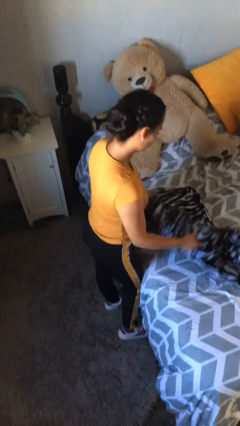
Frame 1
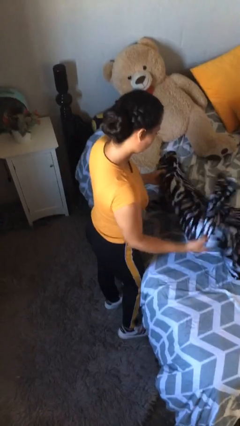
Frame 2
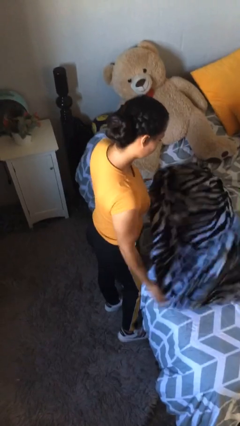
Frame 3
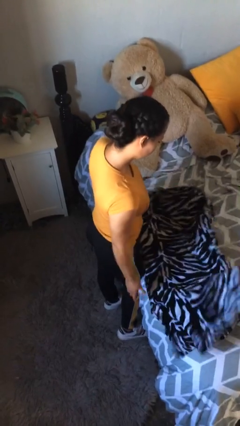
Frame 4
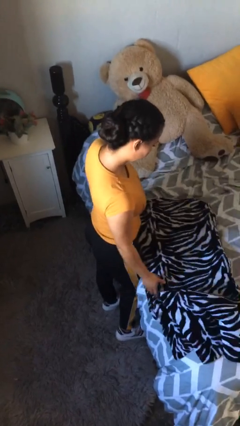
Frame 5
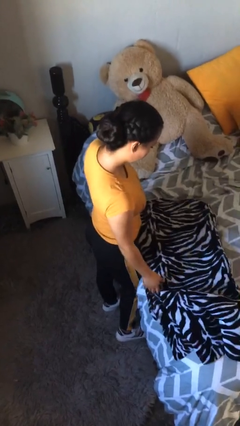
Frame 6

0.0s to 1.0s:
person unfolds blanket

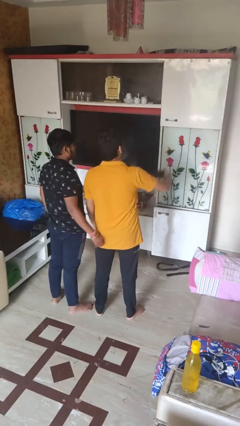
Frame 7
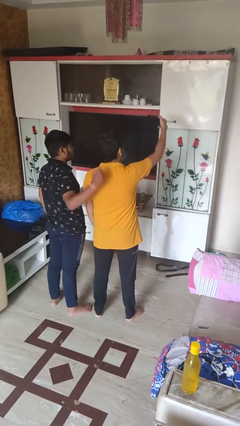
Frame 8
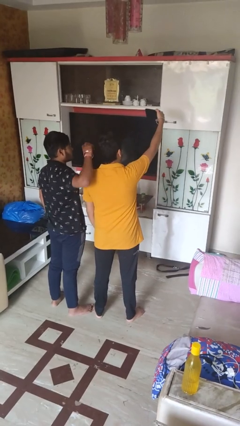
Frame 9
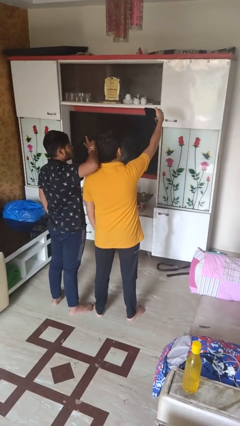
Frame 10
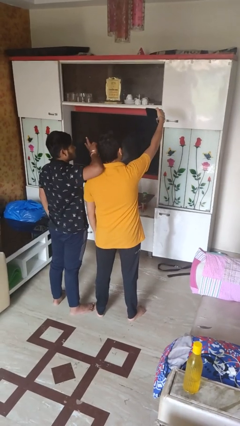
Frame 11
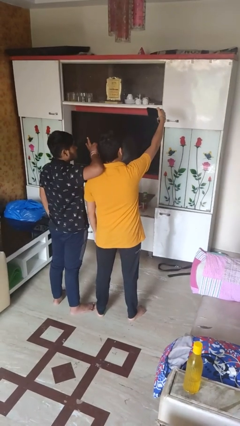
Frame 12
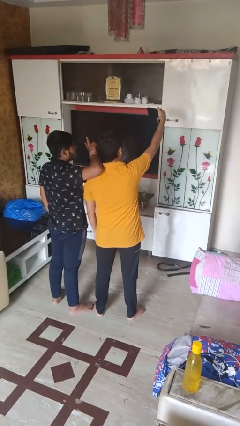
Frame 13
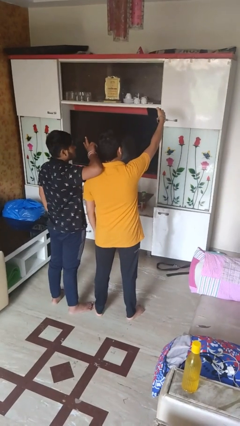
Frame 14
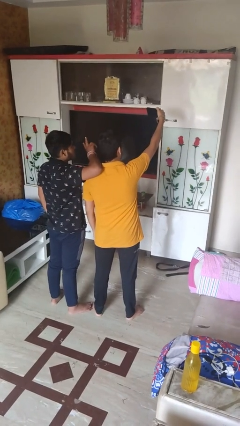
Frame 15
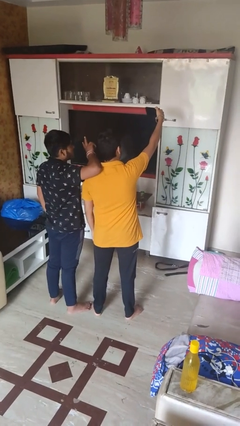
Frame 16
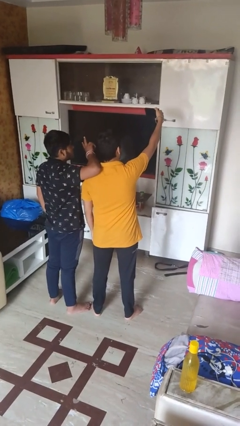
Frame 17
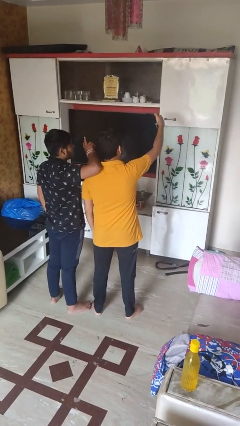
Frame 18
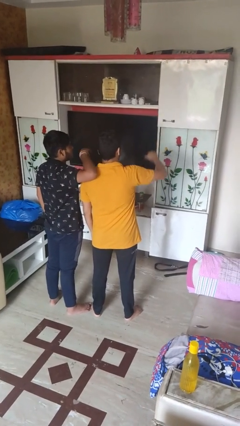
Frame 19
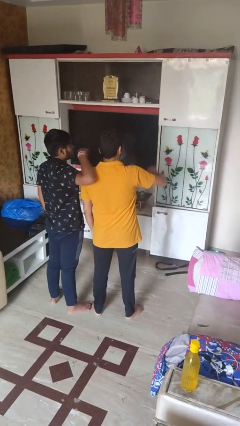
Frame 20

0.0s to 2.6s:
person takes selfie with person

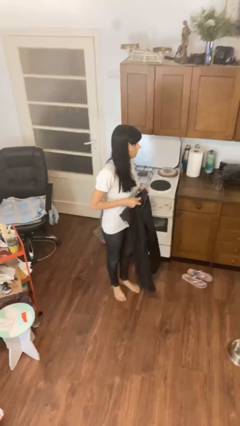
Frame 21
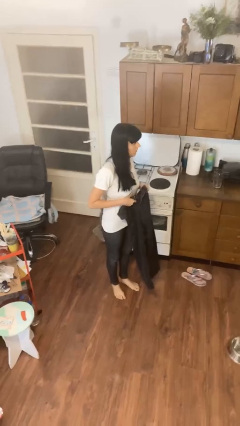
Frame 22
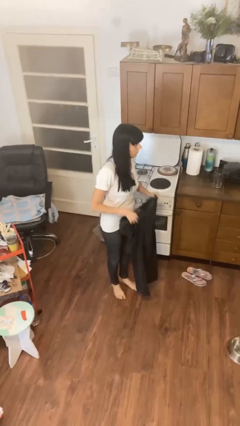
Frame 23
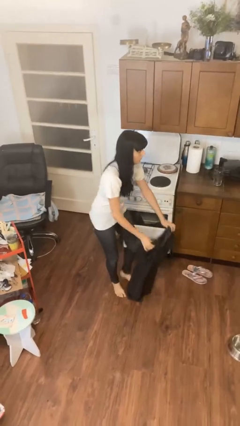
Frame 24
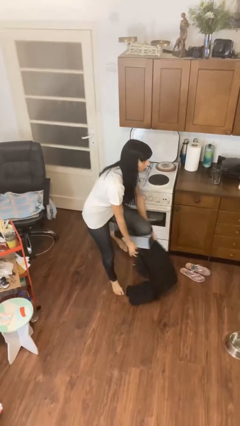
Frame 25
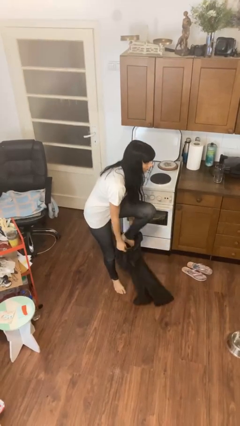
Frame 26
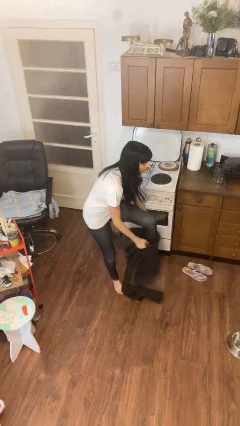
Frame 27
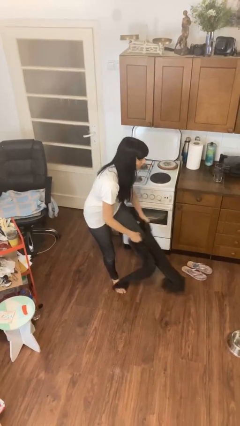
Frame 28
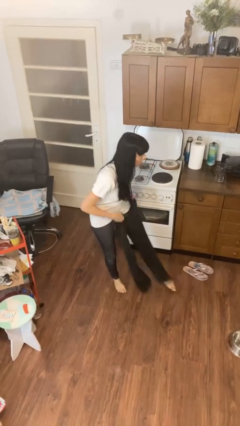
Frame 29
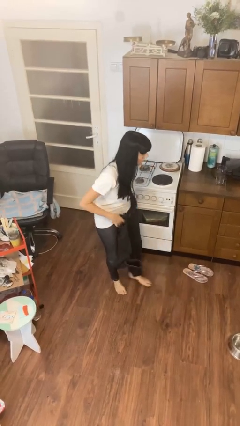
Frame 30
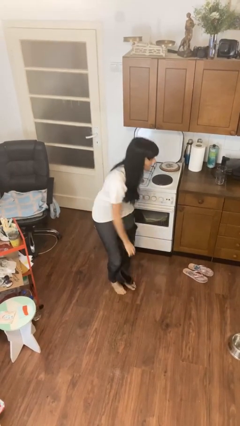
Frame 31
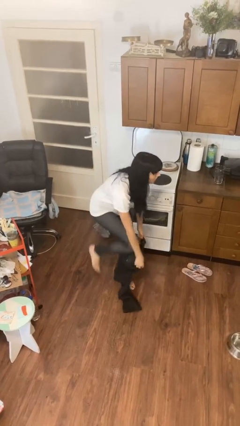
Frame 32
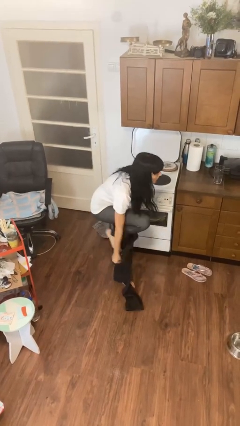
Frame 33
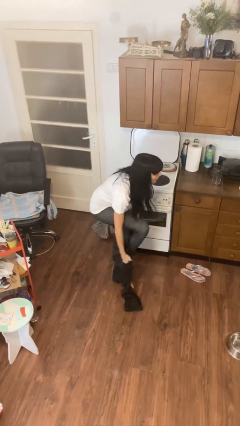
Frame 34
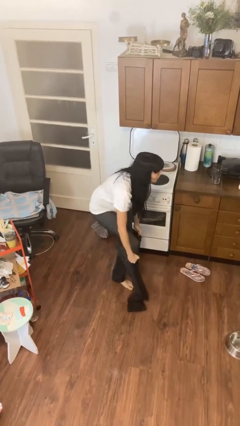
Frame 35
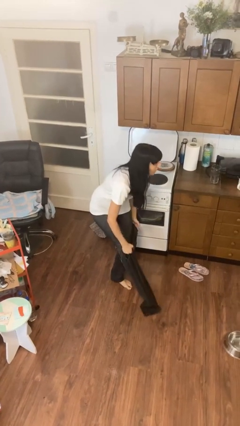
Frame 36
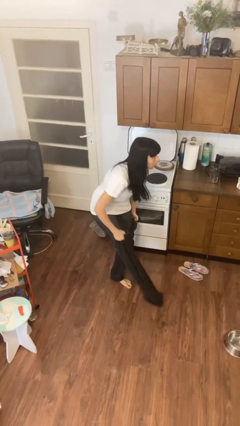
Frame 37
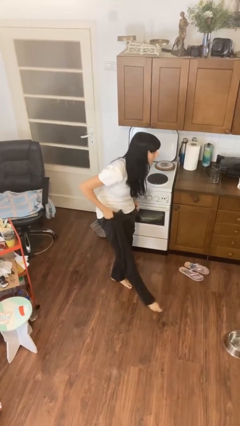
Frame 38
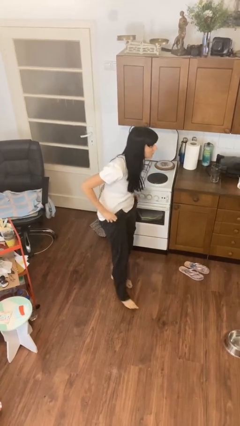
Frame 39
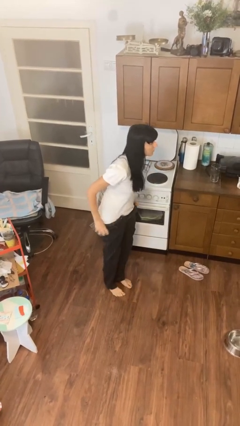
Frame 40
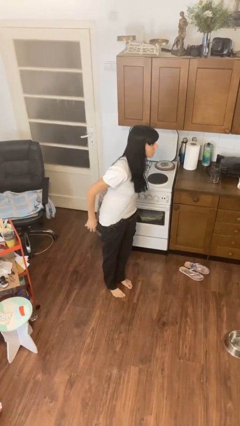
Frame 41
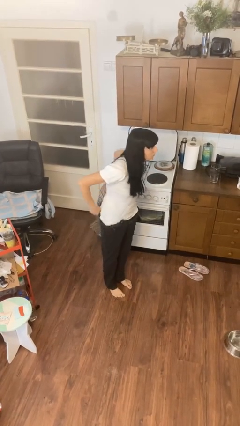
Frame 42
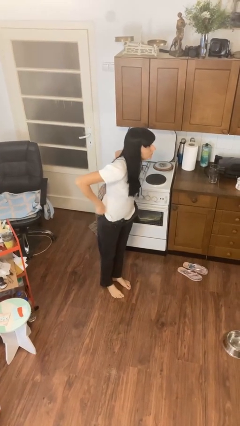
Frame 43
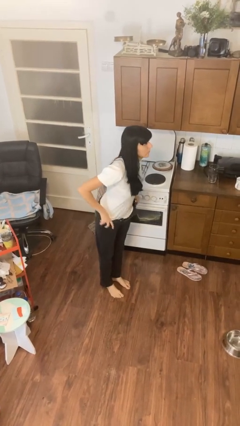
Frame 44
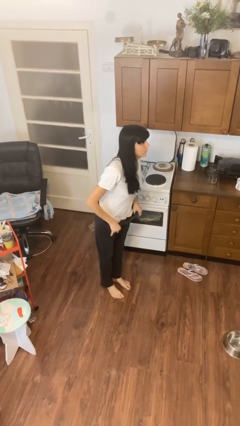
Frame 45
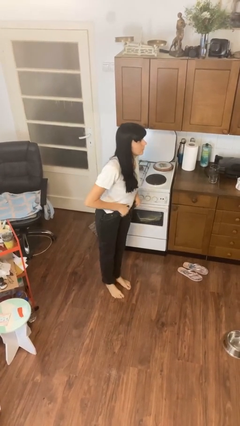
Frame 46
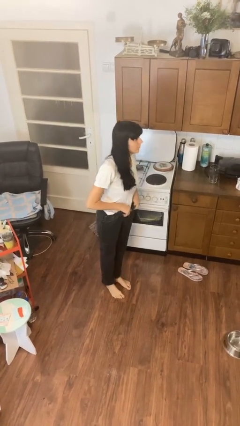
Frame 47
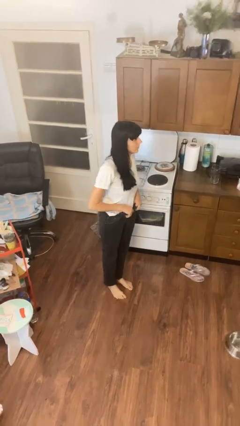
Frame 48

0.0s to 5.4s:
person puts on pants

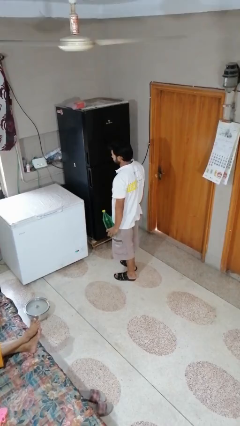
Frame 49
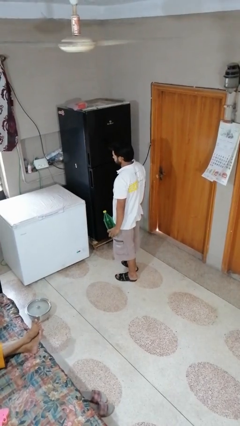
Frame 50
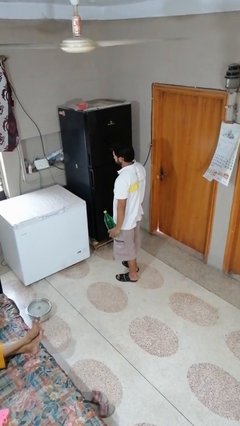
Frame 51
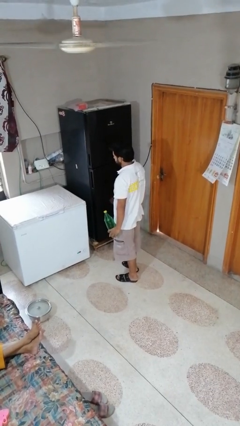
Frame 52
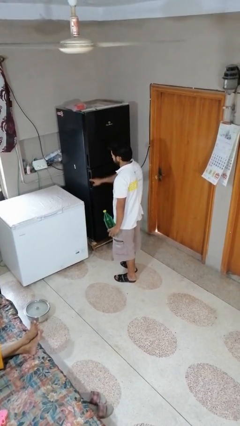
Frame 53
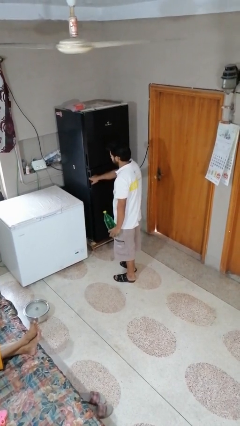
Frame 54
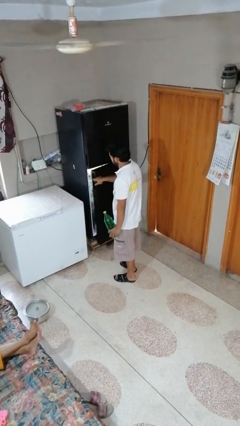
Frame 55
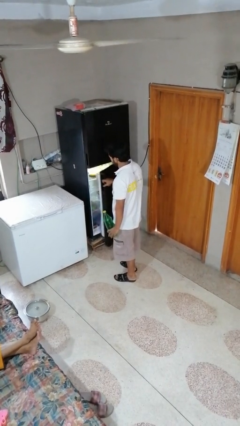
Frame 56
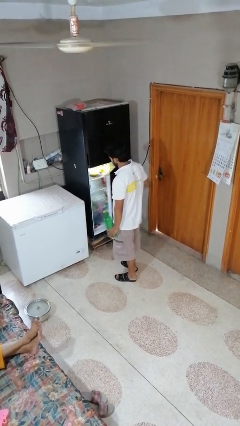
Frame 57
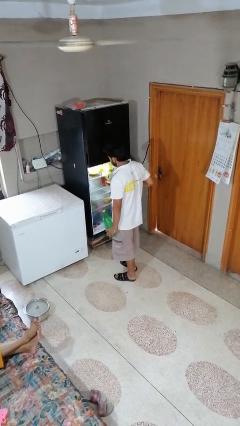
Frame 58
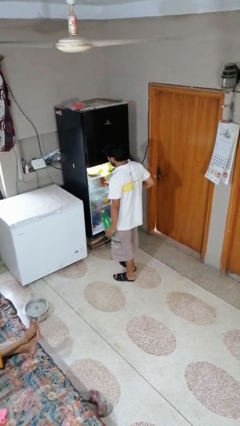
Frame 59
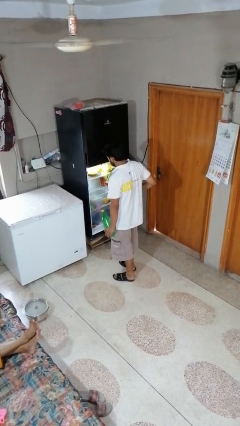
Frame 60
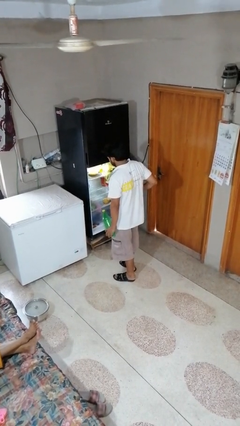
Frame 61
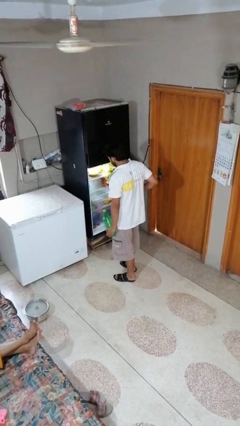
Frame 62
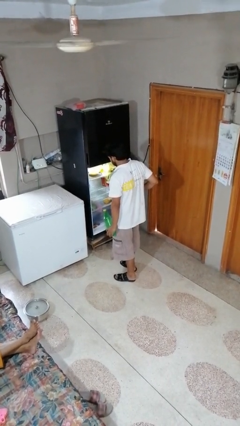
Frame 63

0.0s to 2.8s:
person opens refrigerator

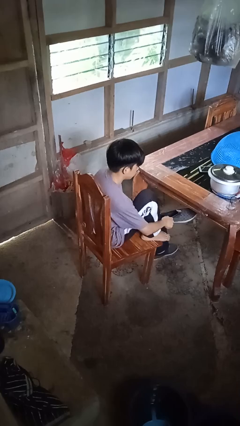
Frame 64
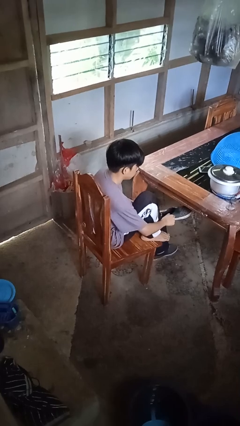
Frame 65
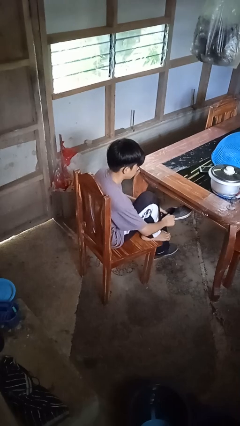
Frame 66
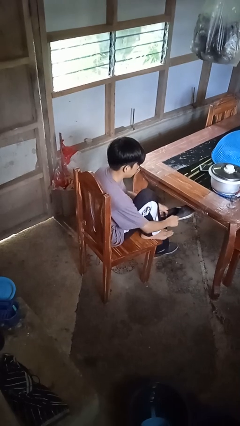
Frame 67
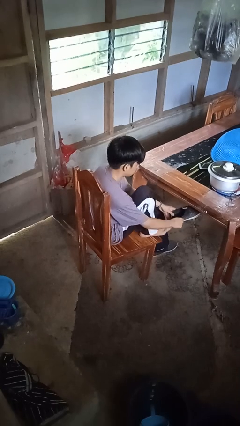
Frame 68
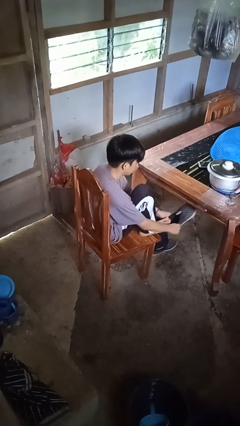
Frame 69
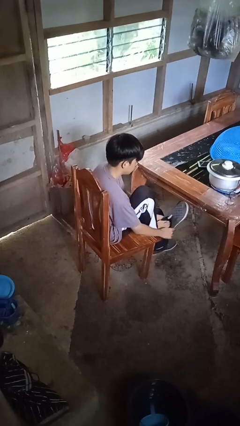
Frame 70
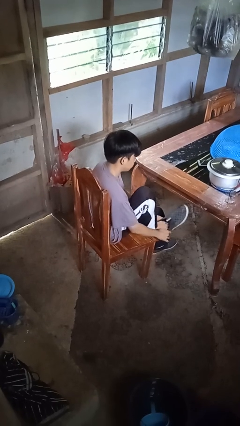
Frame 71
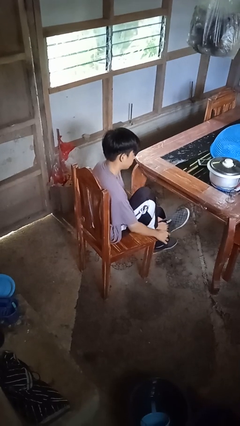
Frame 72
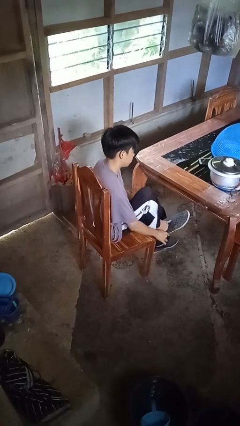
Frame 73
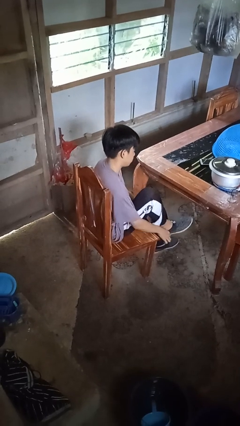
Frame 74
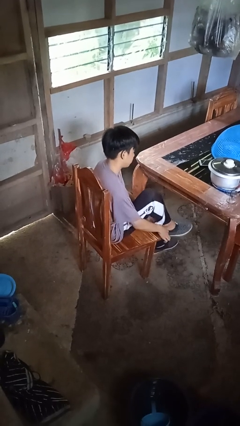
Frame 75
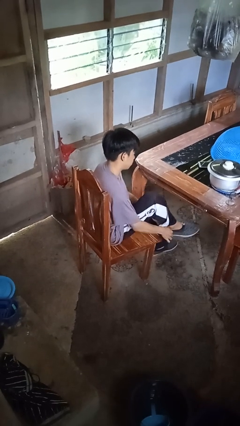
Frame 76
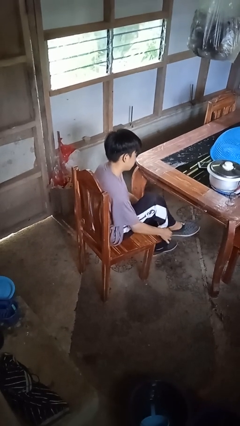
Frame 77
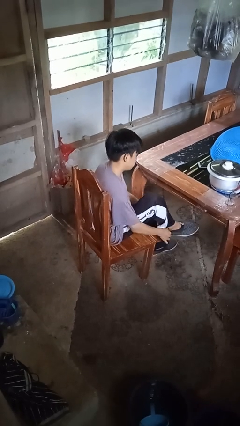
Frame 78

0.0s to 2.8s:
person puts on shoes

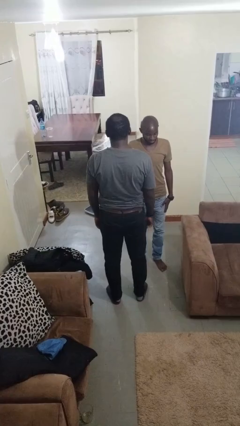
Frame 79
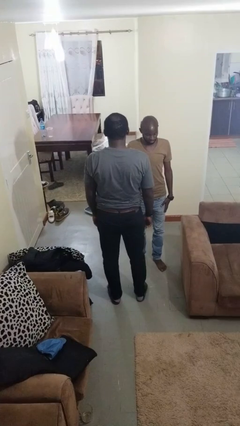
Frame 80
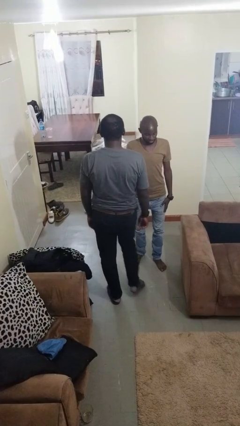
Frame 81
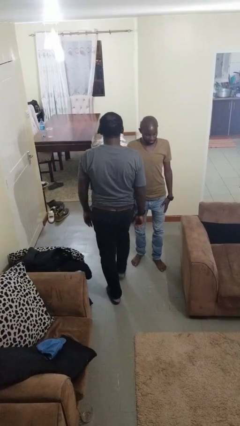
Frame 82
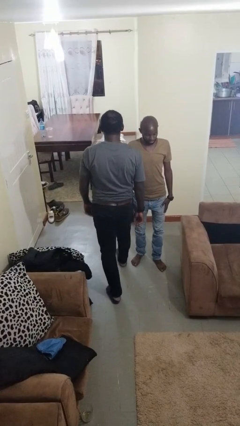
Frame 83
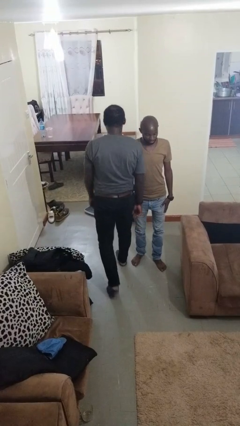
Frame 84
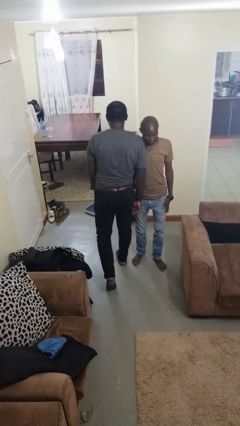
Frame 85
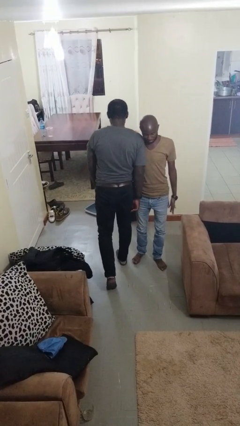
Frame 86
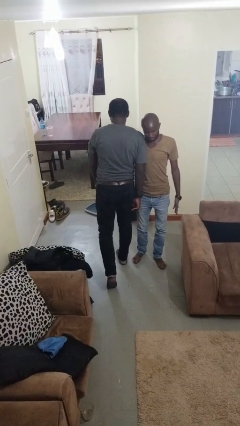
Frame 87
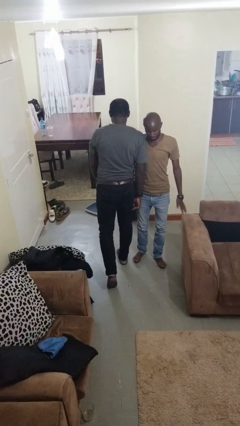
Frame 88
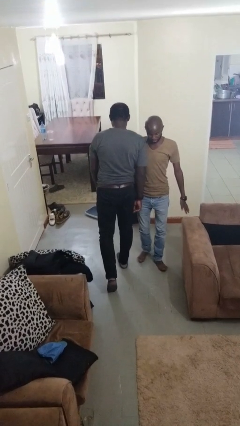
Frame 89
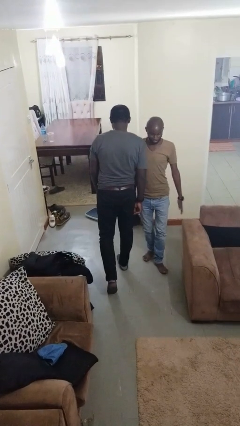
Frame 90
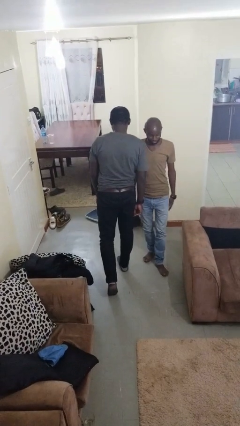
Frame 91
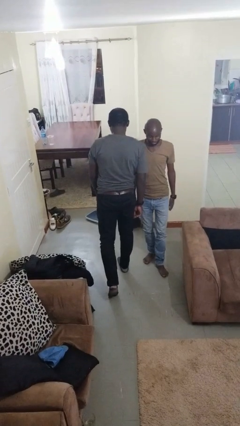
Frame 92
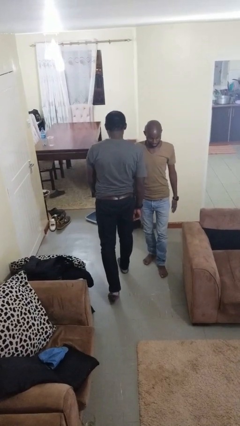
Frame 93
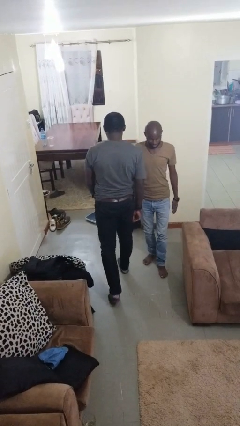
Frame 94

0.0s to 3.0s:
person bumps into person
